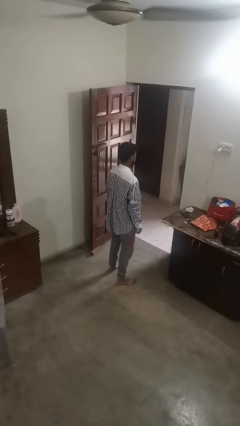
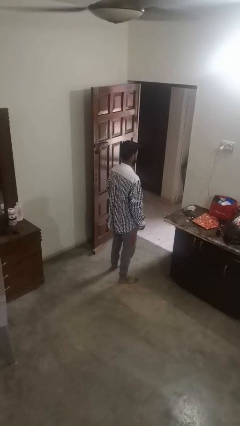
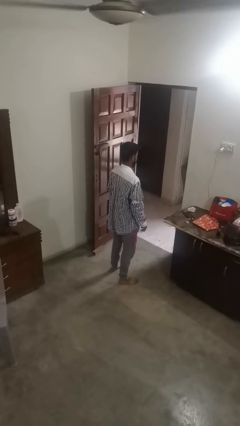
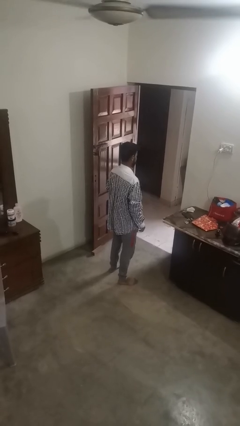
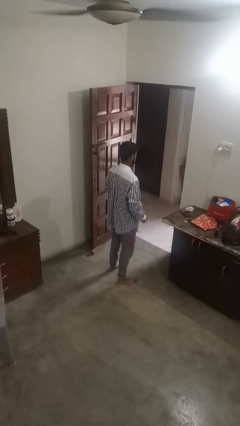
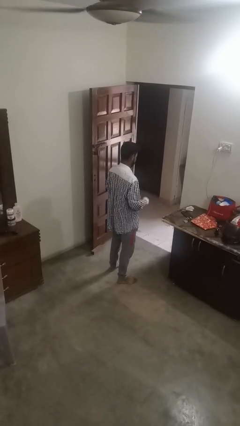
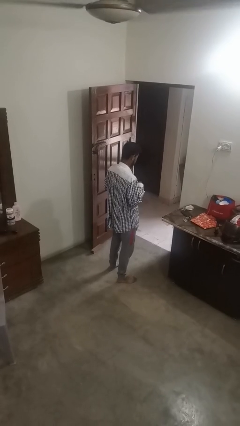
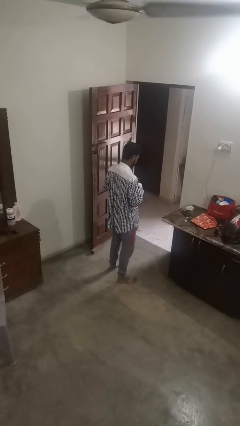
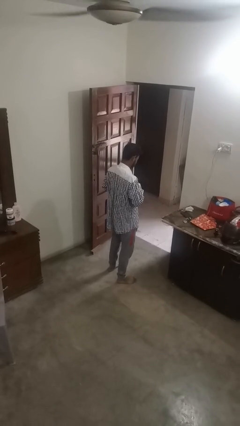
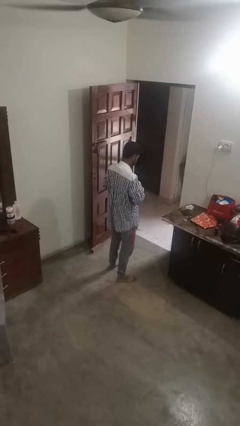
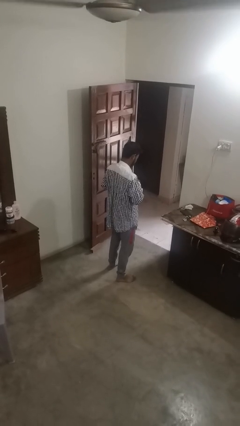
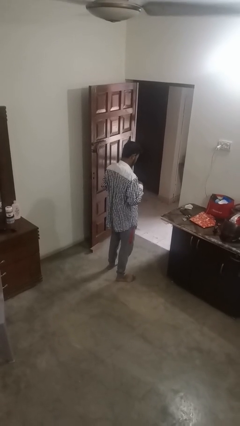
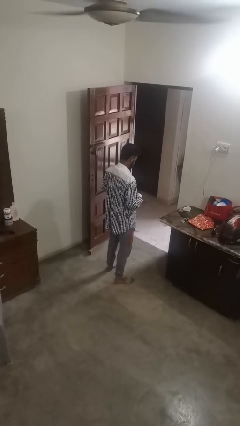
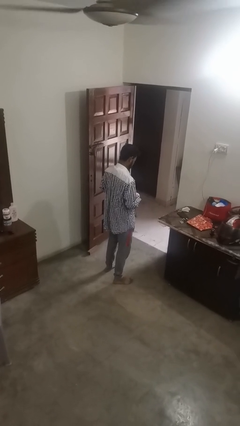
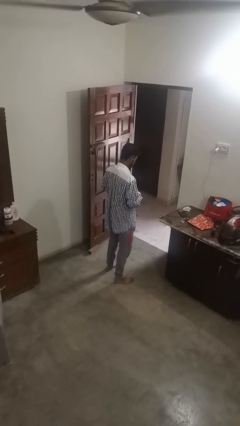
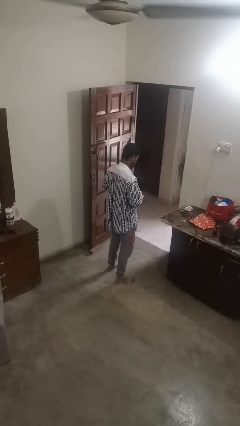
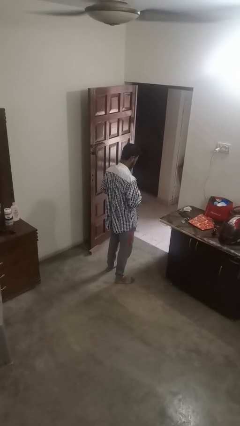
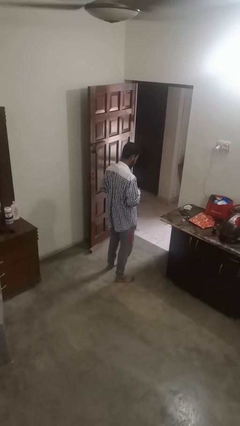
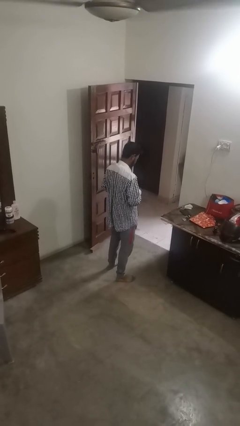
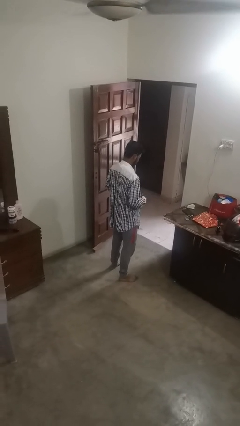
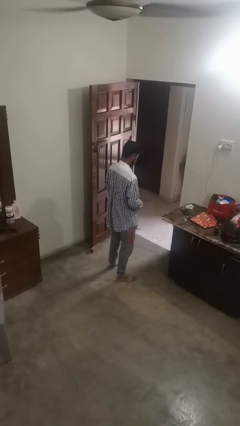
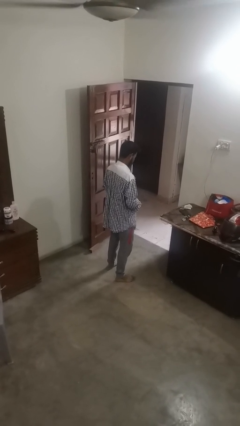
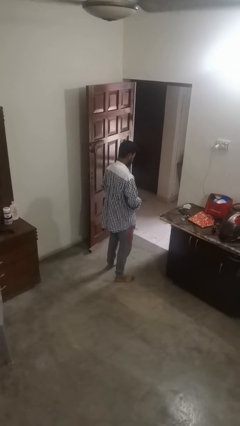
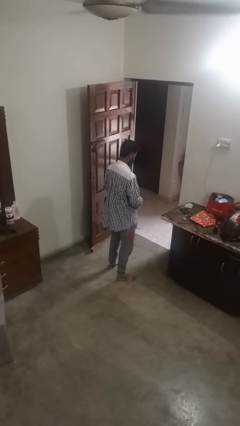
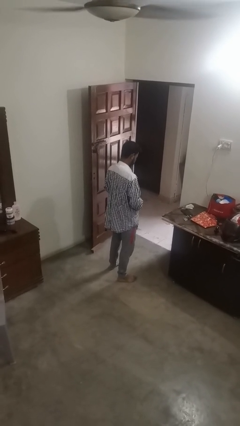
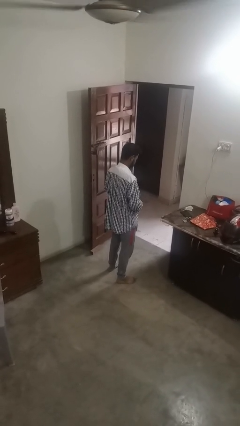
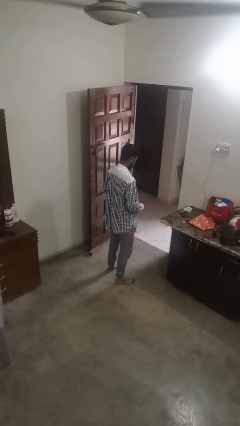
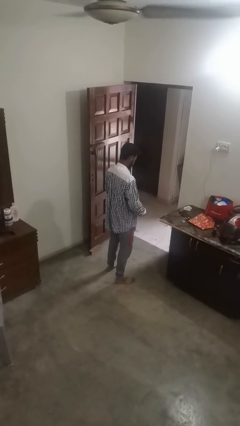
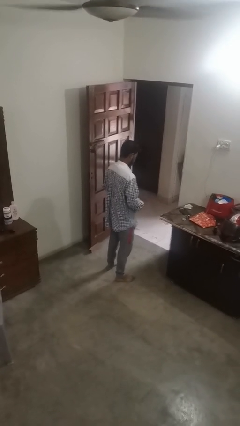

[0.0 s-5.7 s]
person unbuttons shirt

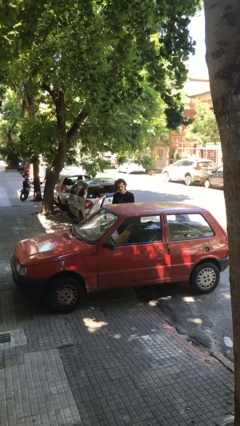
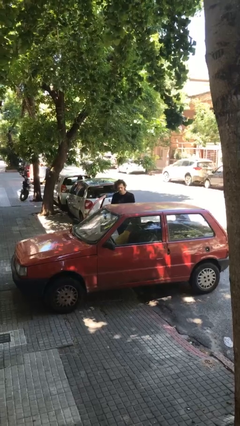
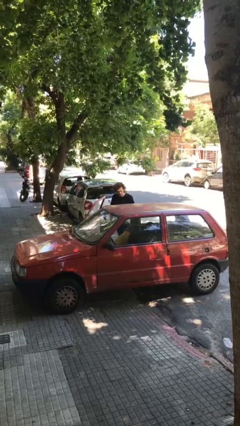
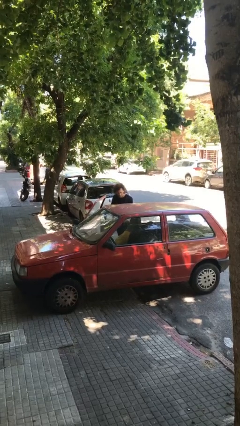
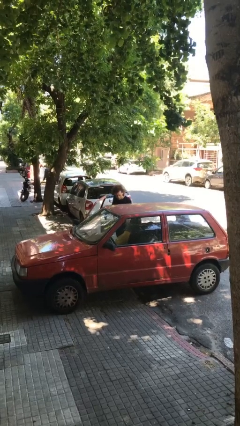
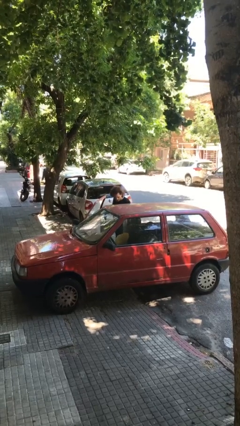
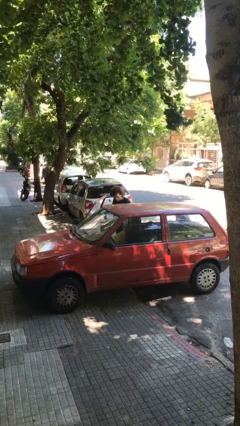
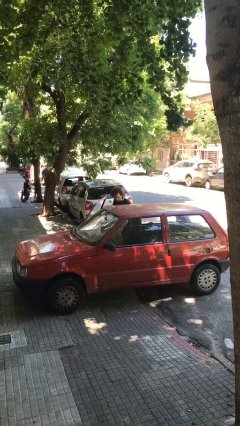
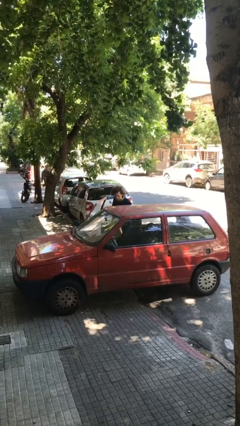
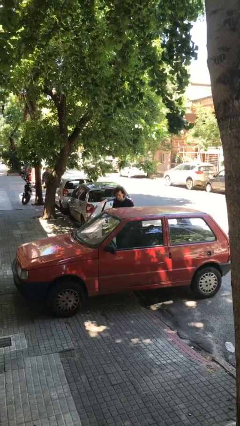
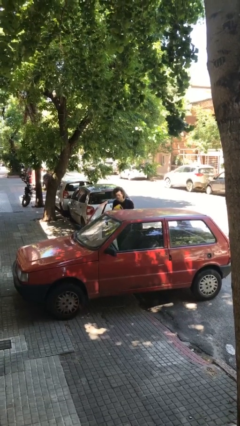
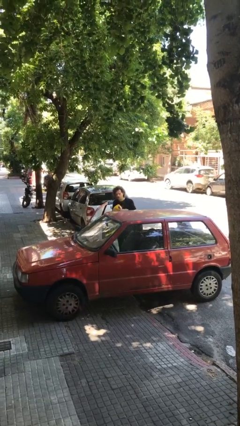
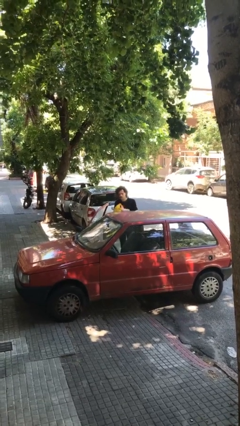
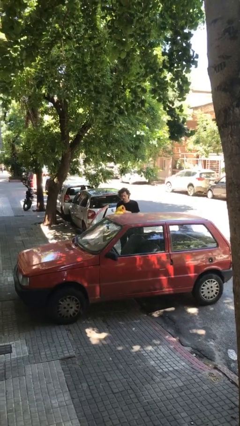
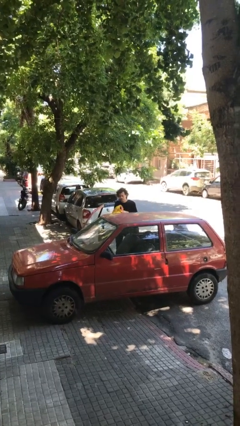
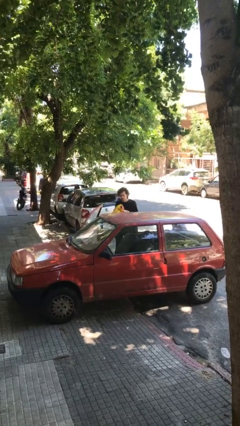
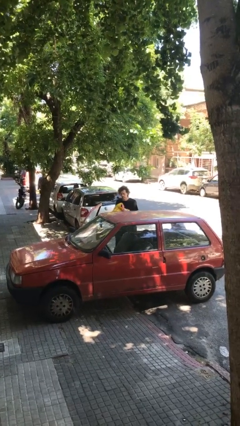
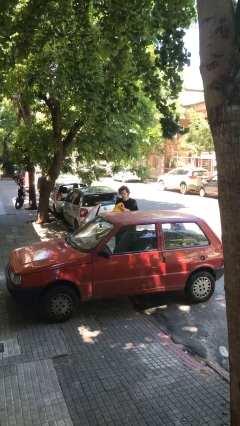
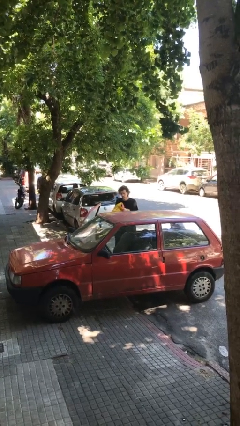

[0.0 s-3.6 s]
person unloads car

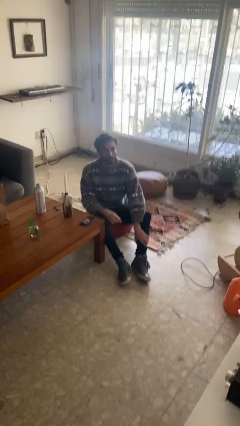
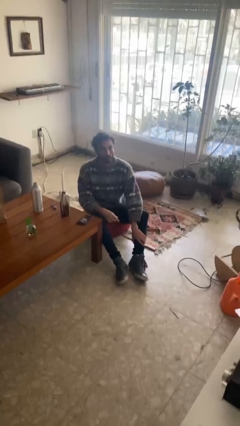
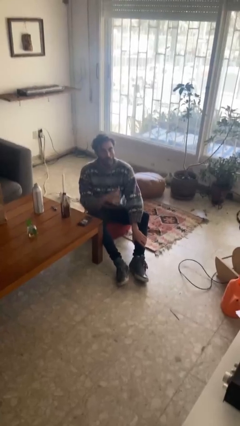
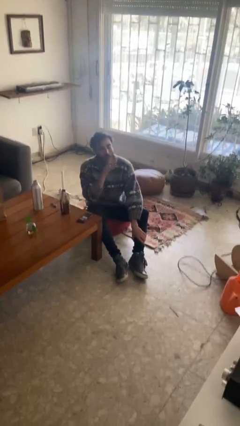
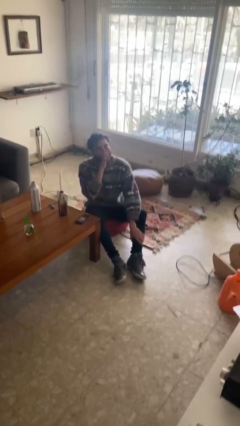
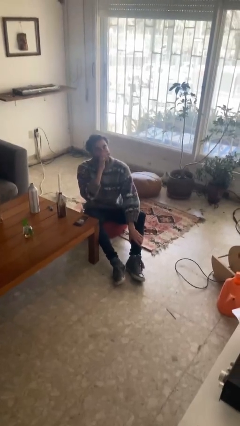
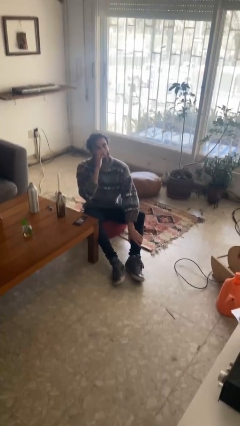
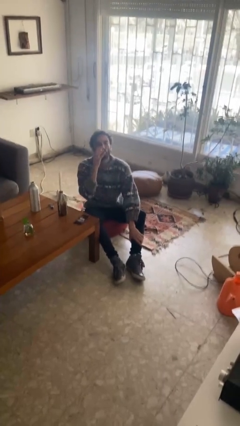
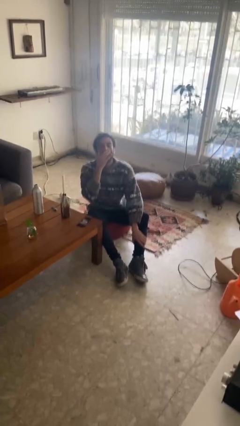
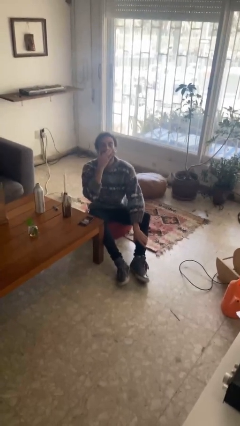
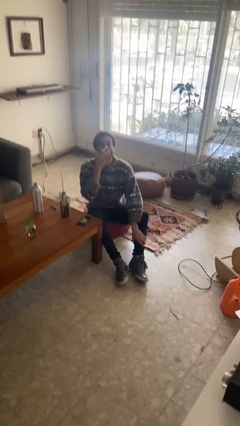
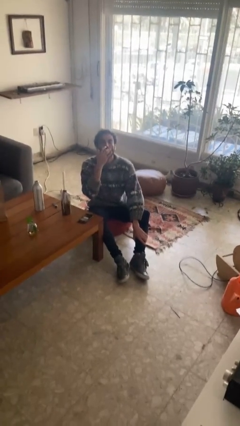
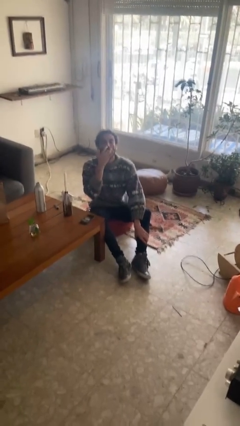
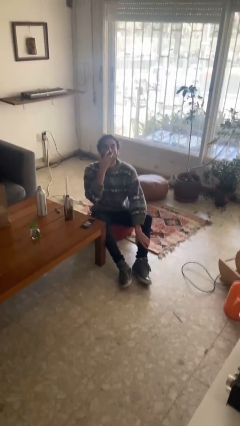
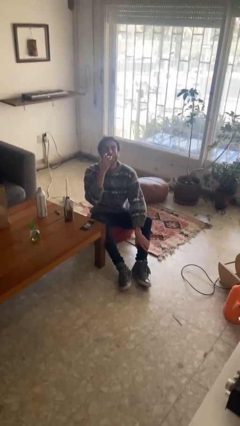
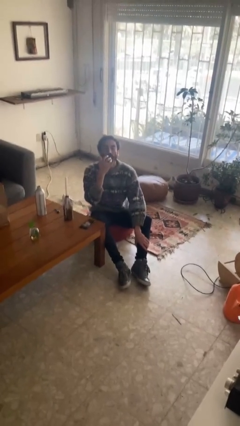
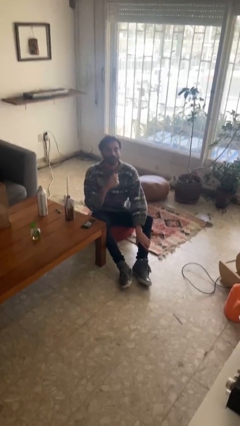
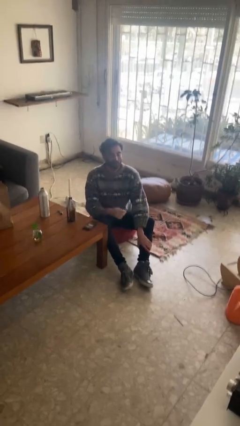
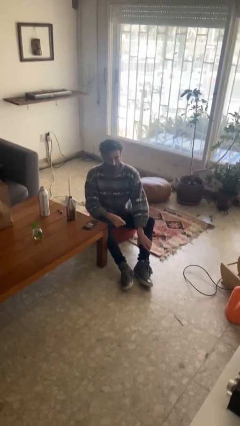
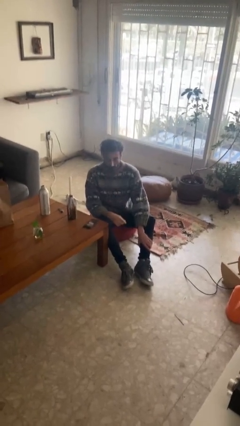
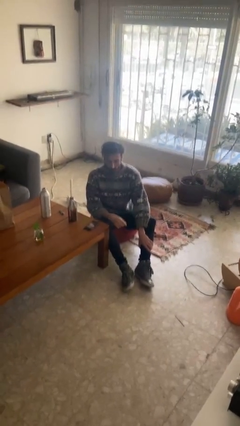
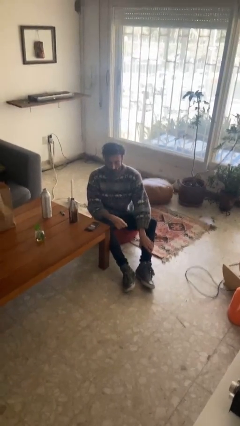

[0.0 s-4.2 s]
person licks fingers

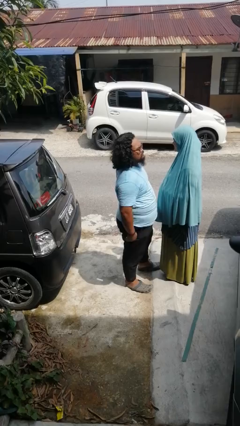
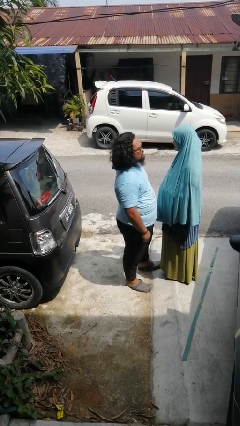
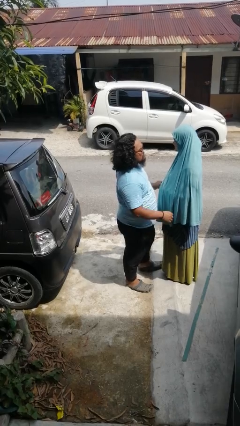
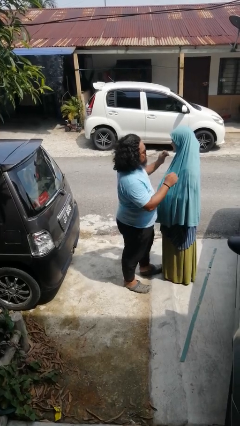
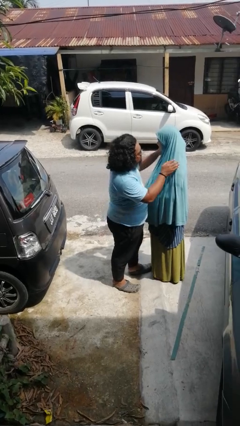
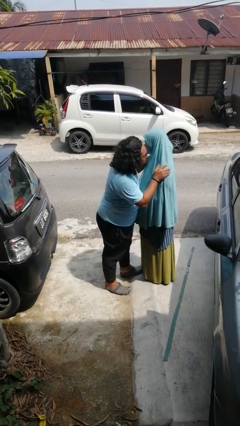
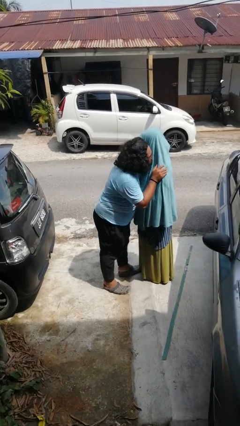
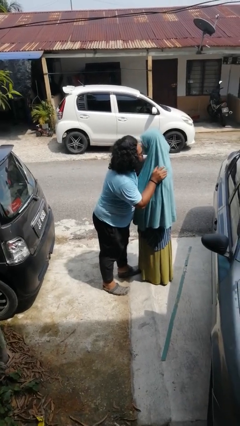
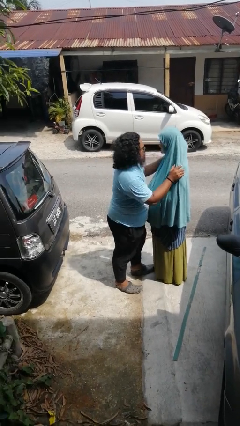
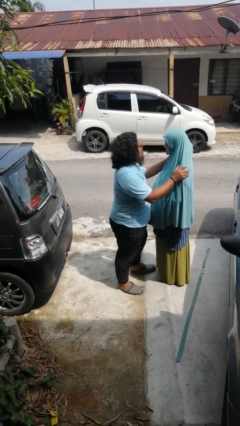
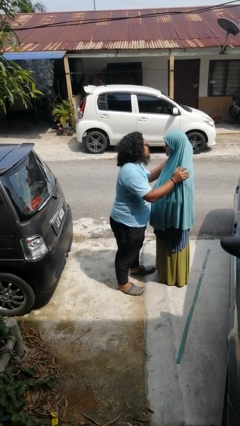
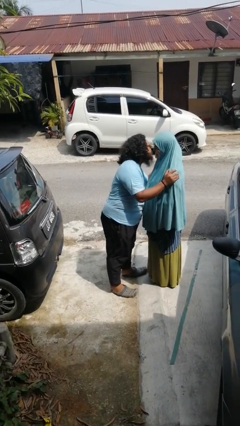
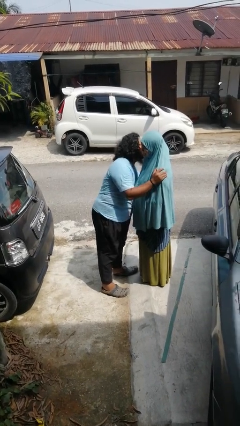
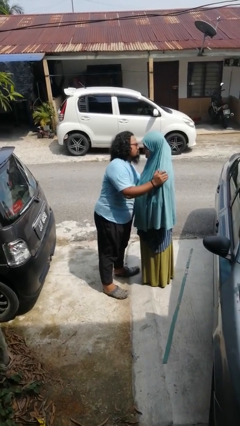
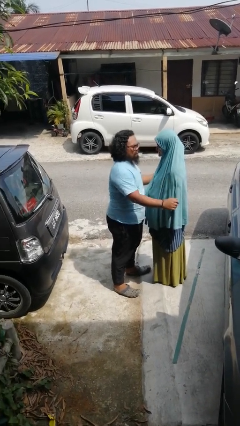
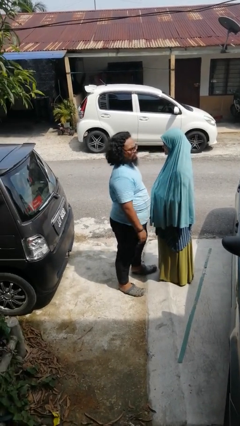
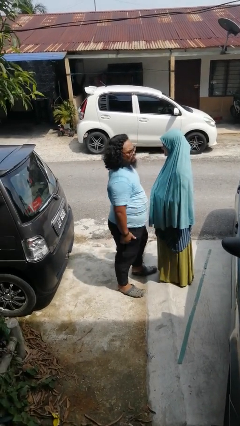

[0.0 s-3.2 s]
person kisses cheek of person

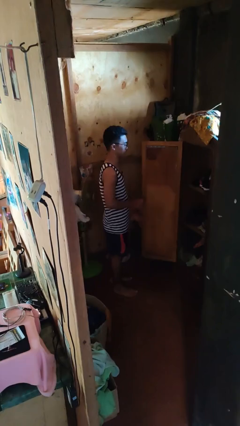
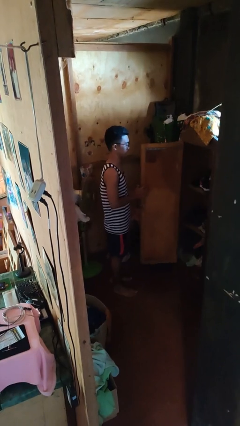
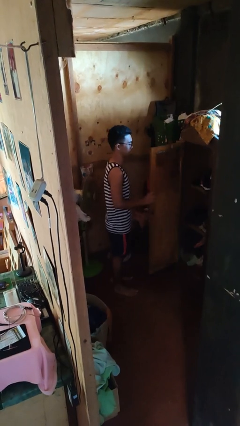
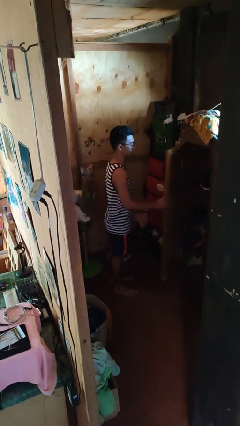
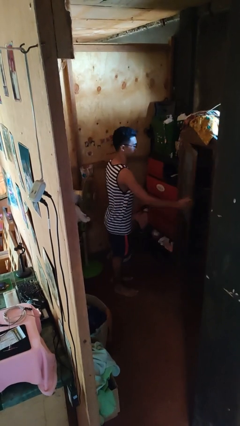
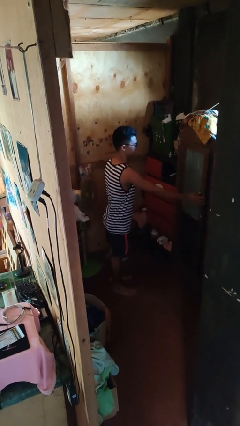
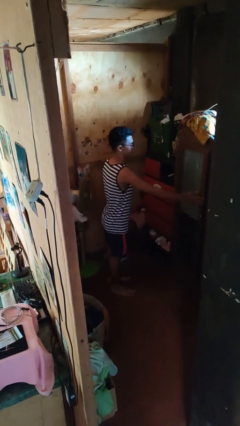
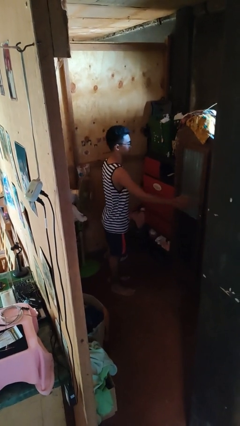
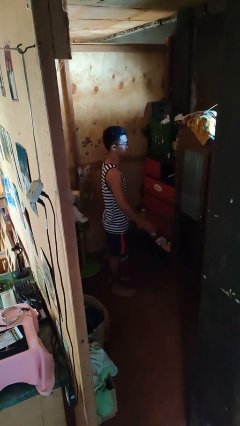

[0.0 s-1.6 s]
person closes closet door
